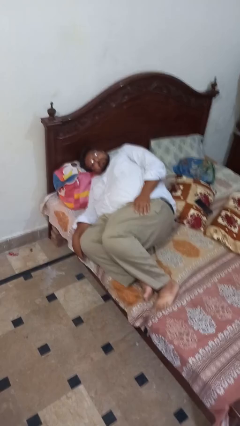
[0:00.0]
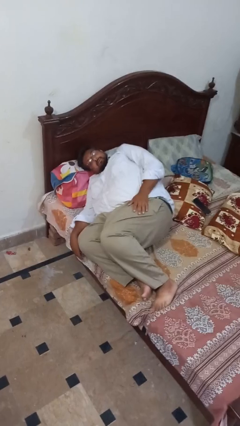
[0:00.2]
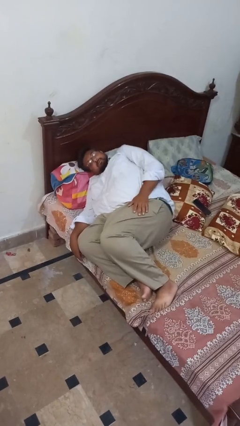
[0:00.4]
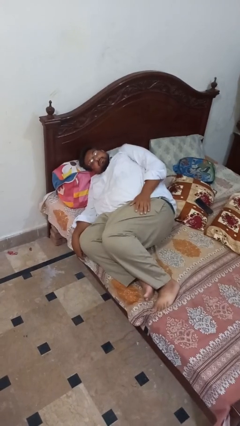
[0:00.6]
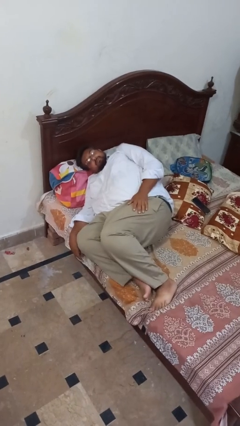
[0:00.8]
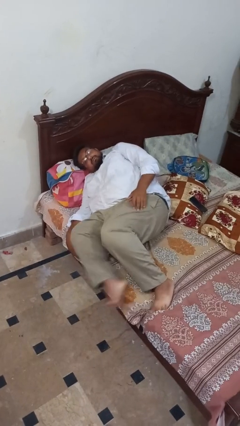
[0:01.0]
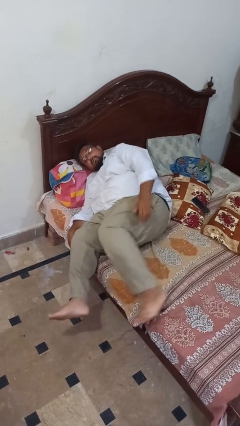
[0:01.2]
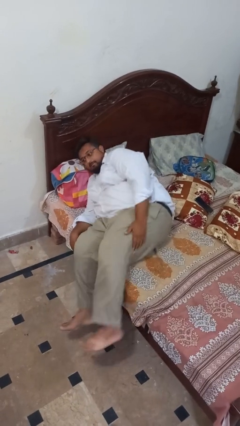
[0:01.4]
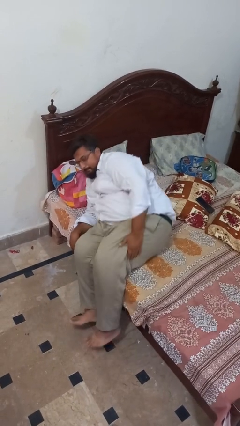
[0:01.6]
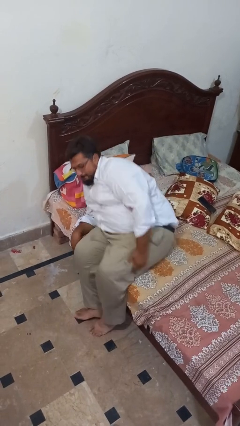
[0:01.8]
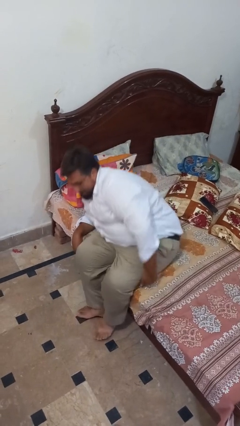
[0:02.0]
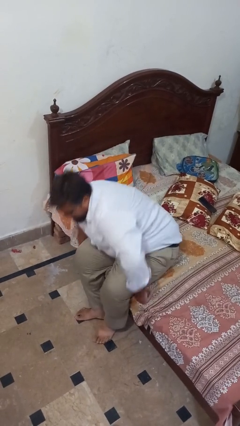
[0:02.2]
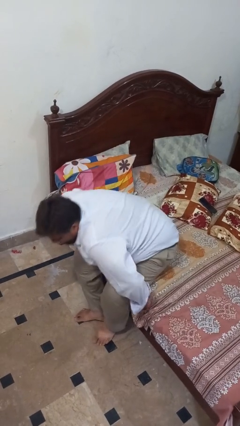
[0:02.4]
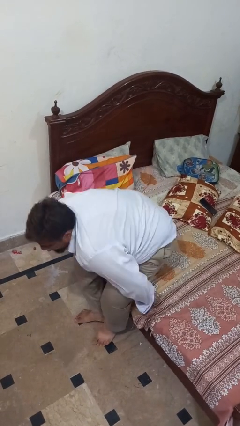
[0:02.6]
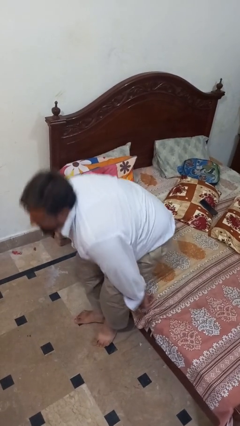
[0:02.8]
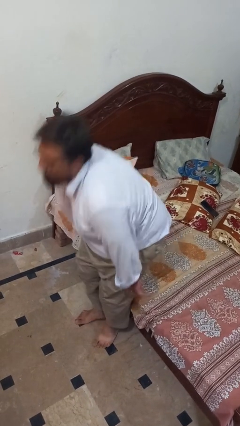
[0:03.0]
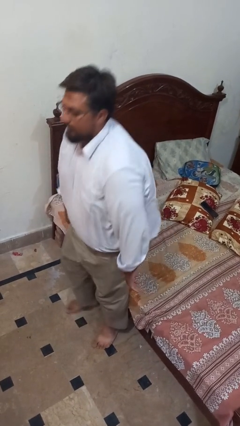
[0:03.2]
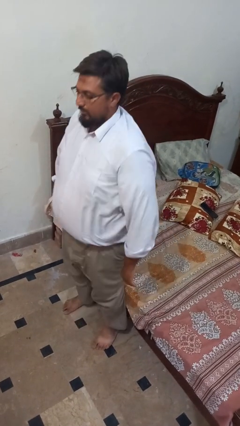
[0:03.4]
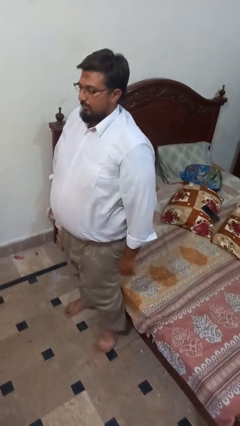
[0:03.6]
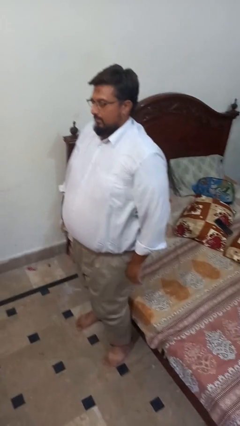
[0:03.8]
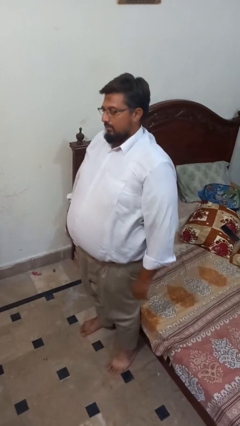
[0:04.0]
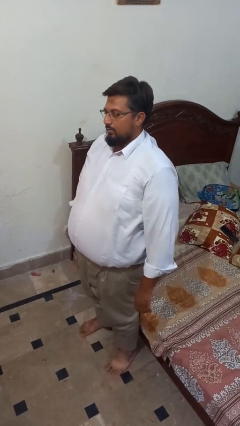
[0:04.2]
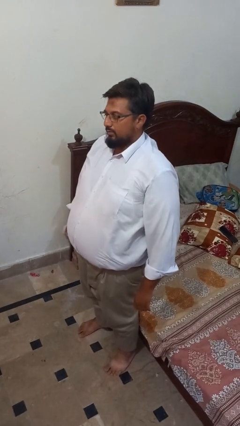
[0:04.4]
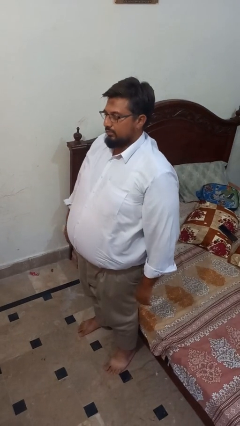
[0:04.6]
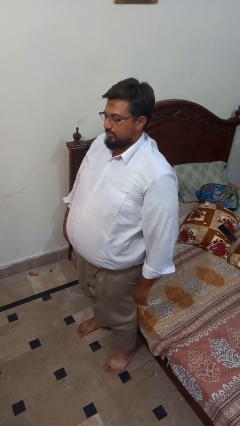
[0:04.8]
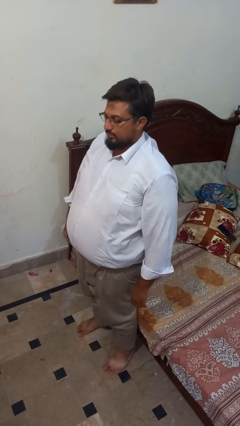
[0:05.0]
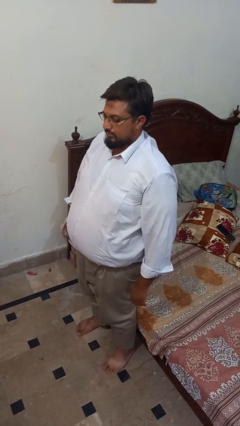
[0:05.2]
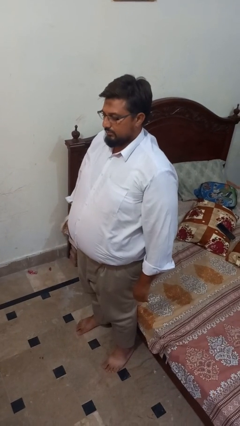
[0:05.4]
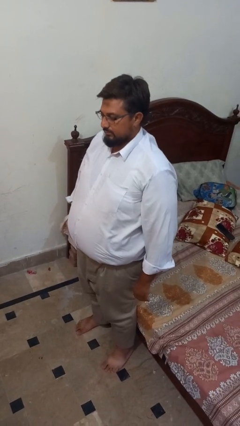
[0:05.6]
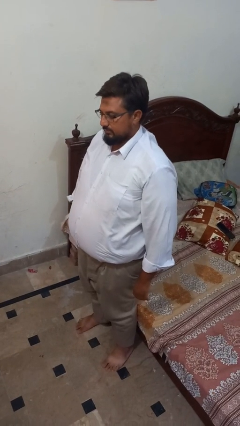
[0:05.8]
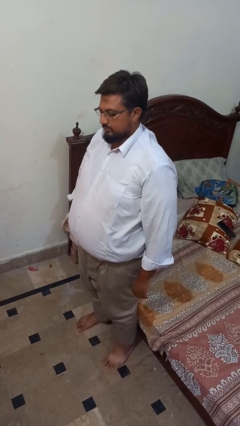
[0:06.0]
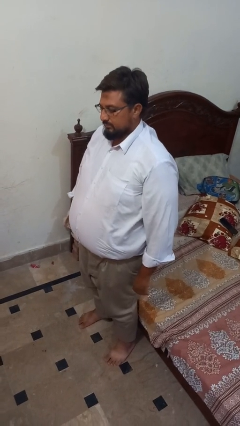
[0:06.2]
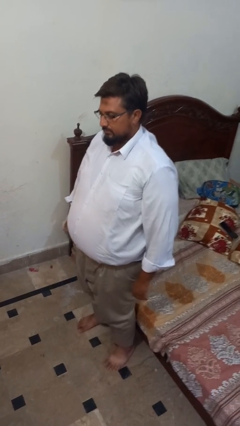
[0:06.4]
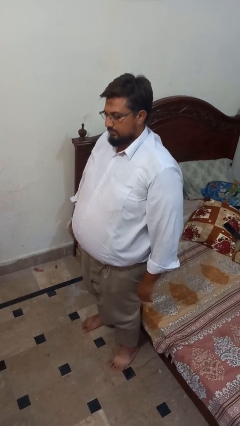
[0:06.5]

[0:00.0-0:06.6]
person stands up

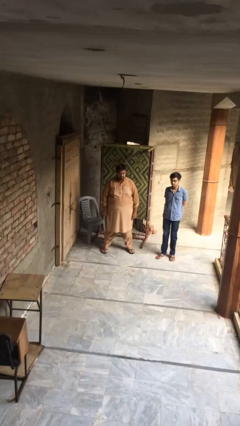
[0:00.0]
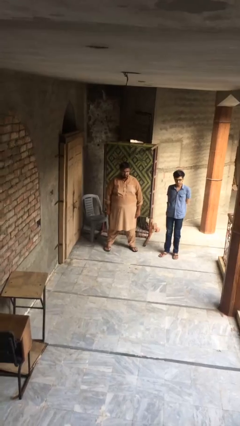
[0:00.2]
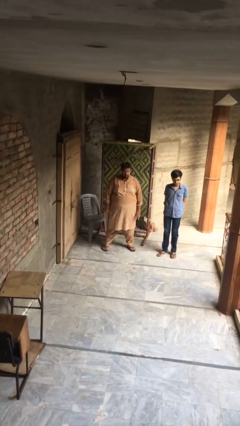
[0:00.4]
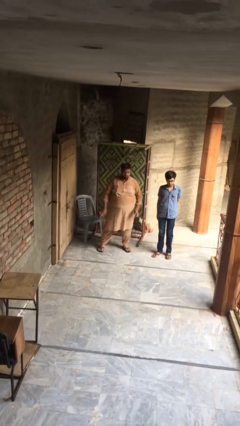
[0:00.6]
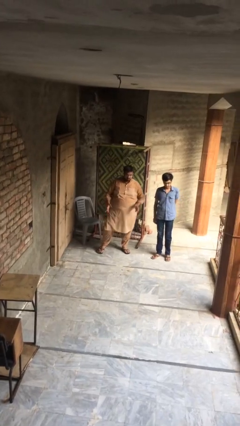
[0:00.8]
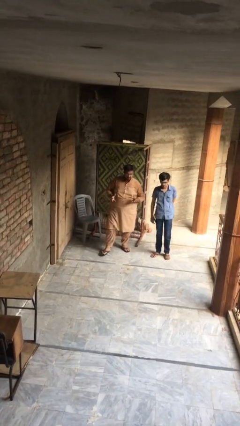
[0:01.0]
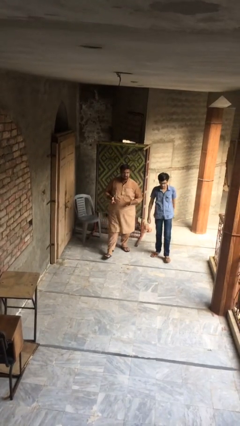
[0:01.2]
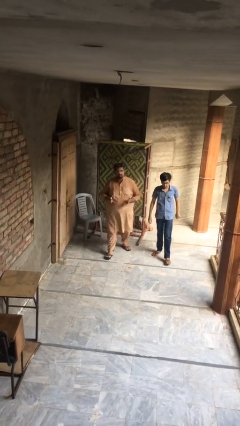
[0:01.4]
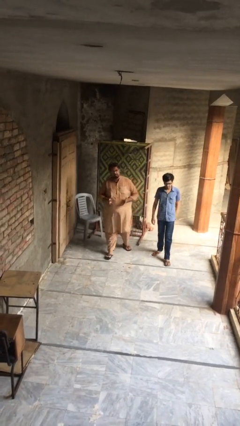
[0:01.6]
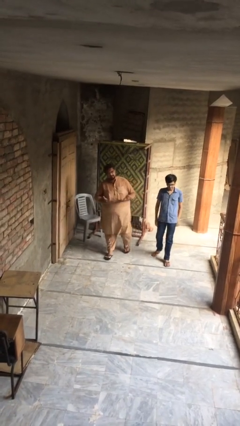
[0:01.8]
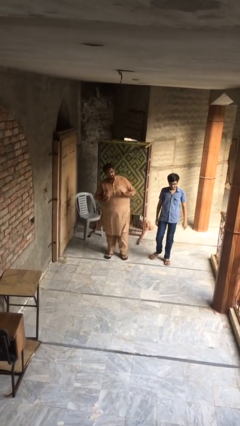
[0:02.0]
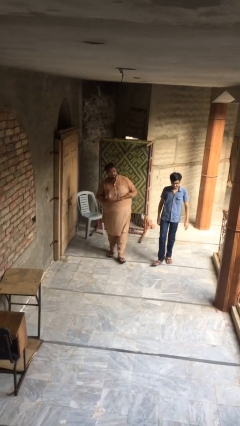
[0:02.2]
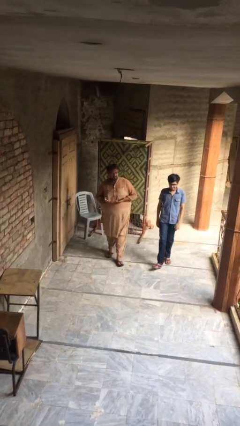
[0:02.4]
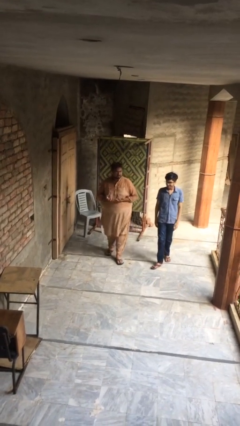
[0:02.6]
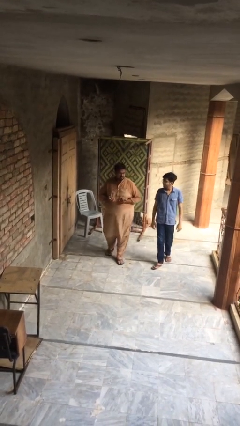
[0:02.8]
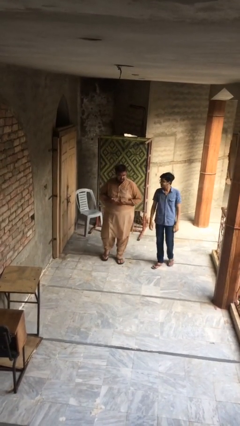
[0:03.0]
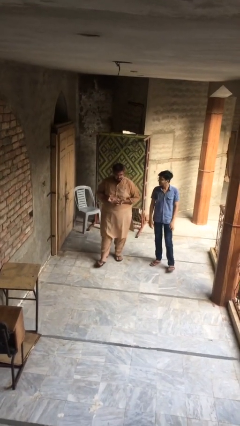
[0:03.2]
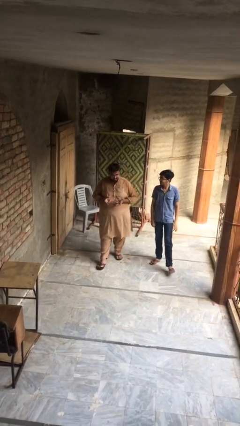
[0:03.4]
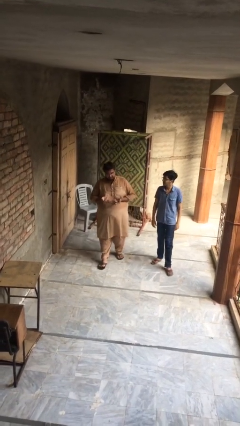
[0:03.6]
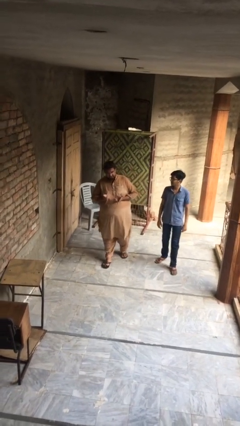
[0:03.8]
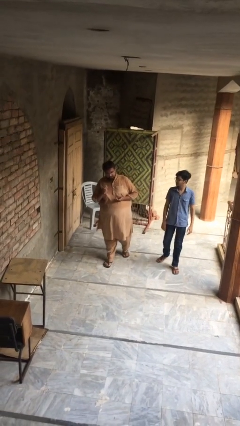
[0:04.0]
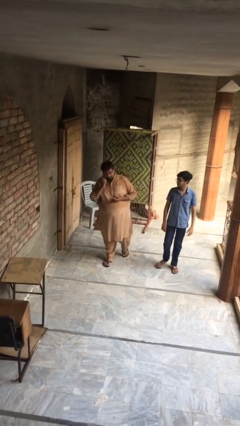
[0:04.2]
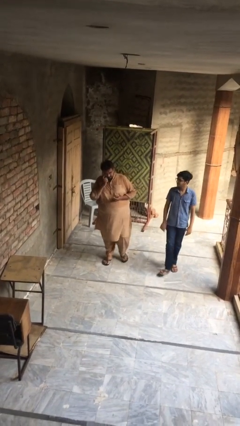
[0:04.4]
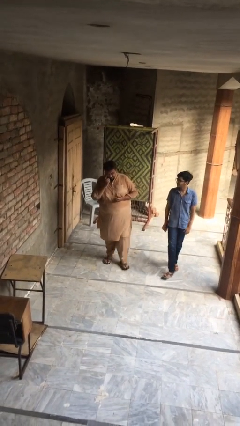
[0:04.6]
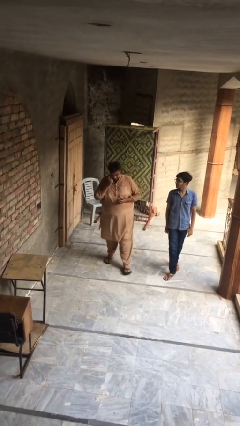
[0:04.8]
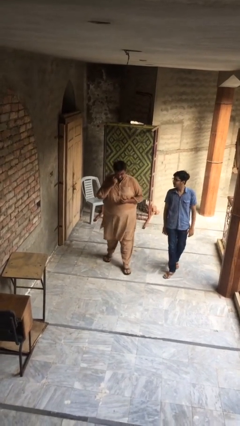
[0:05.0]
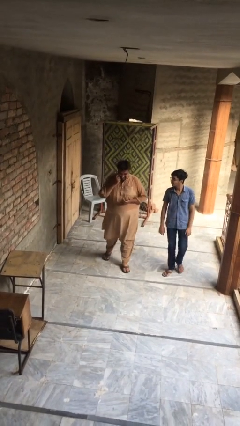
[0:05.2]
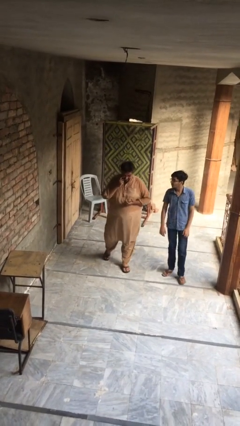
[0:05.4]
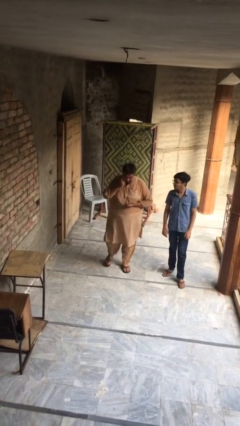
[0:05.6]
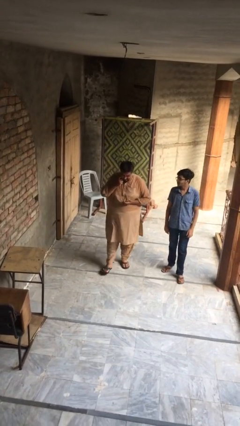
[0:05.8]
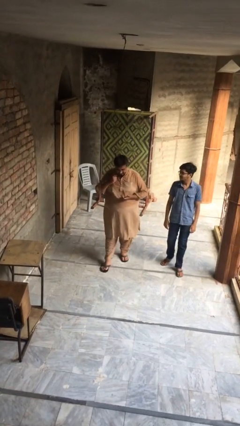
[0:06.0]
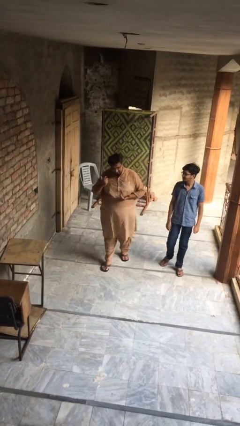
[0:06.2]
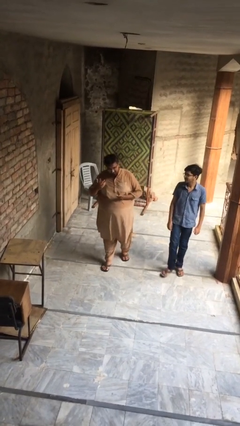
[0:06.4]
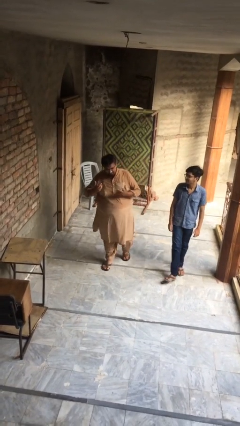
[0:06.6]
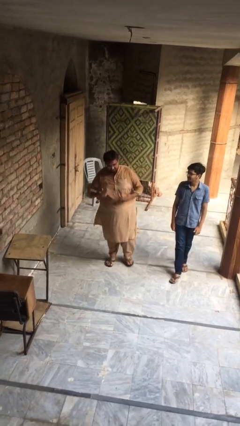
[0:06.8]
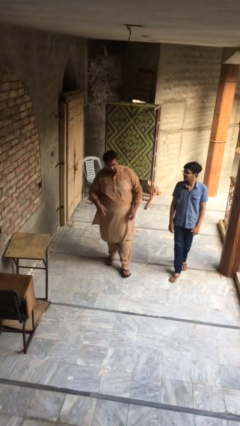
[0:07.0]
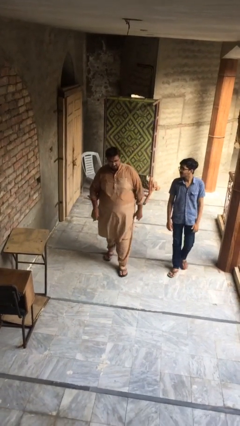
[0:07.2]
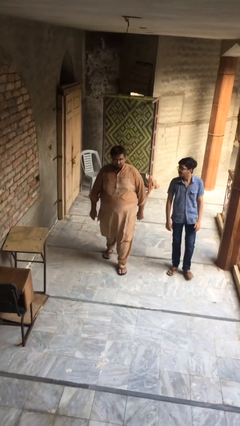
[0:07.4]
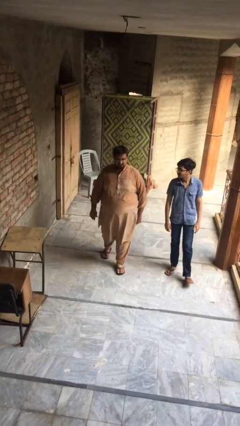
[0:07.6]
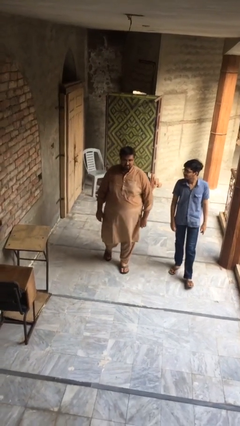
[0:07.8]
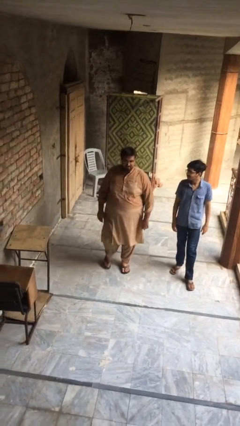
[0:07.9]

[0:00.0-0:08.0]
person talks to person

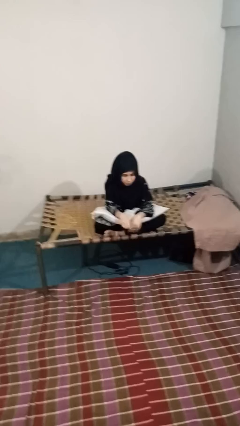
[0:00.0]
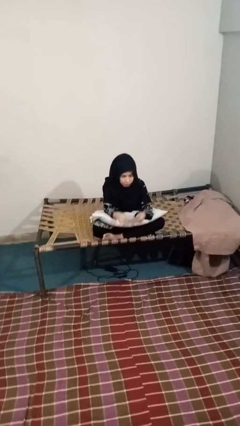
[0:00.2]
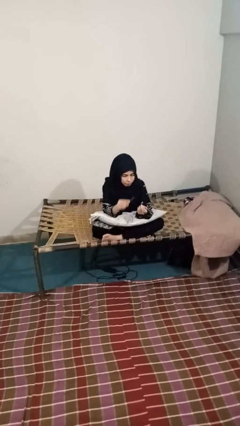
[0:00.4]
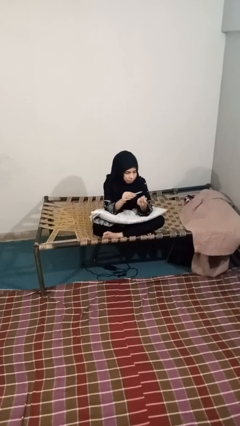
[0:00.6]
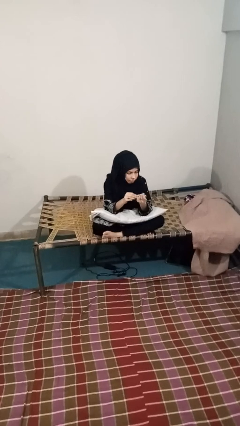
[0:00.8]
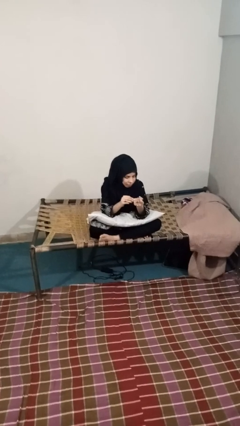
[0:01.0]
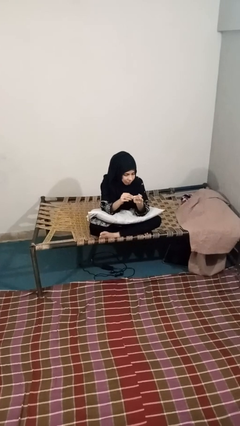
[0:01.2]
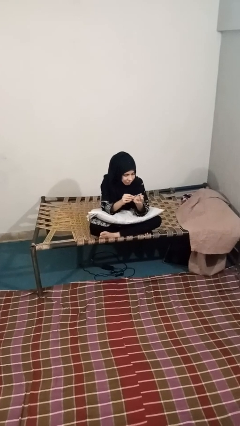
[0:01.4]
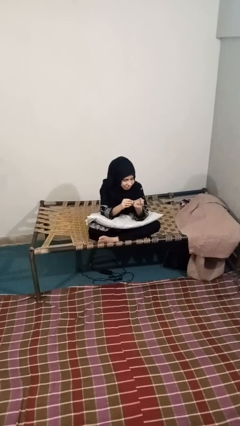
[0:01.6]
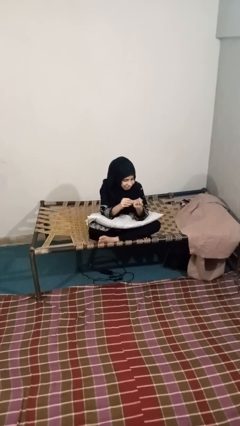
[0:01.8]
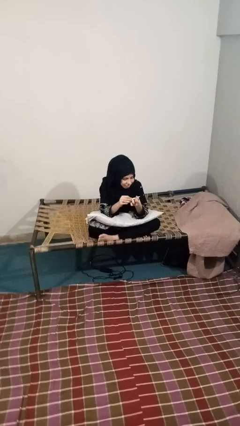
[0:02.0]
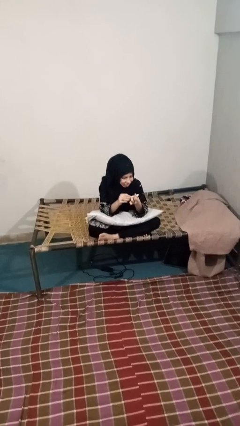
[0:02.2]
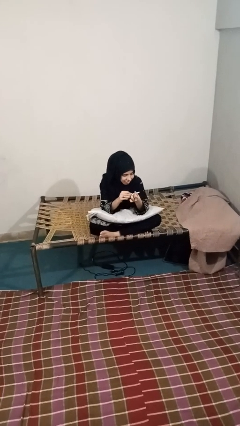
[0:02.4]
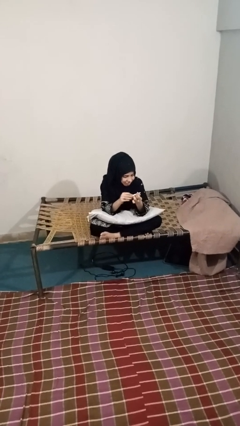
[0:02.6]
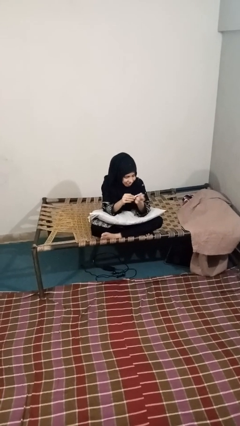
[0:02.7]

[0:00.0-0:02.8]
person files fingernails

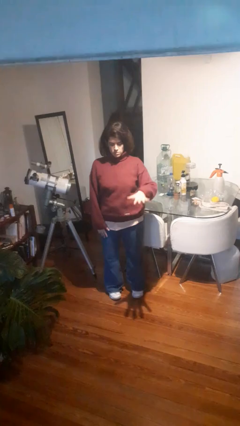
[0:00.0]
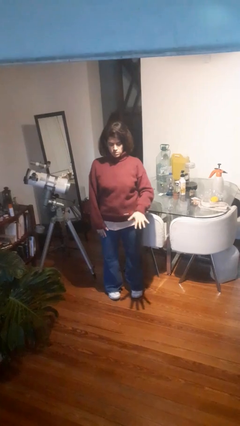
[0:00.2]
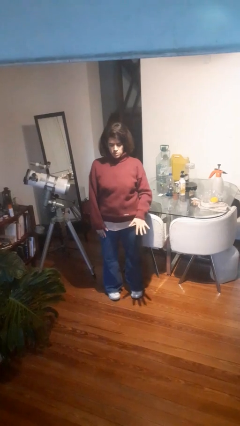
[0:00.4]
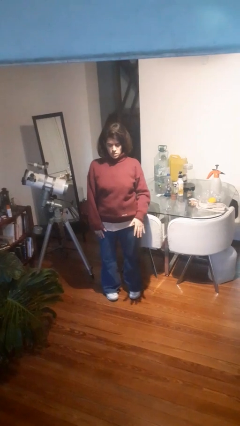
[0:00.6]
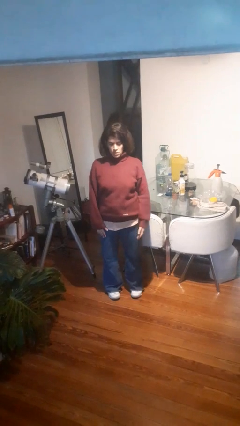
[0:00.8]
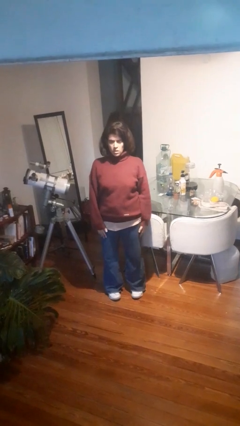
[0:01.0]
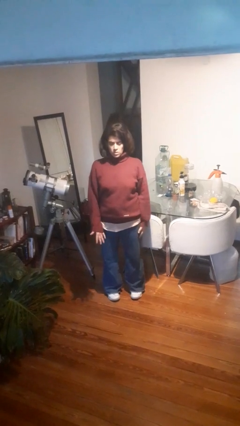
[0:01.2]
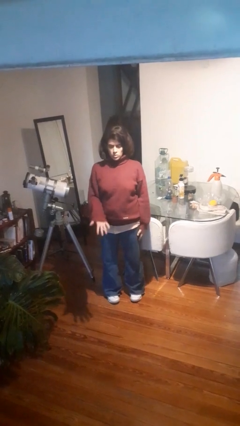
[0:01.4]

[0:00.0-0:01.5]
person gestures swipe down
